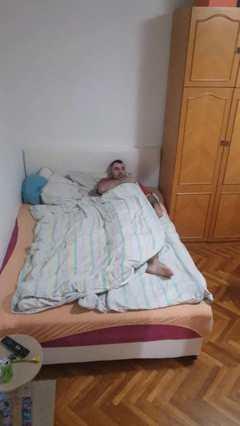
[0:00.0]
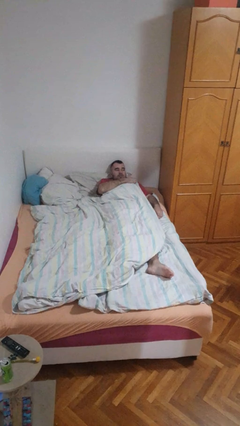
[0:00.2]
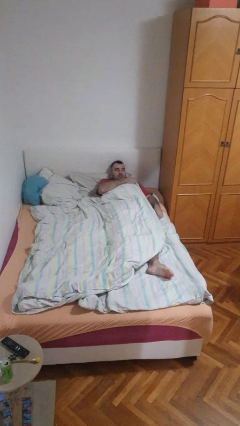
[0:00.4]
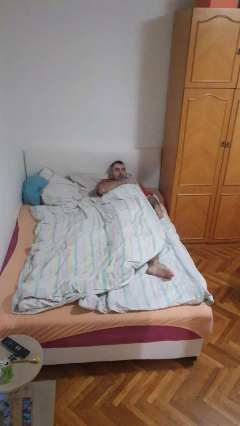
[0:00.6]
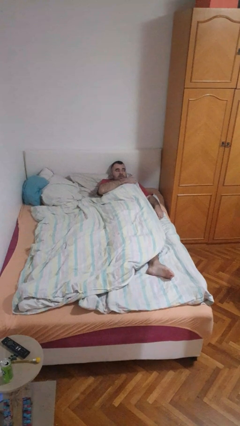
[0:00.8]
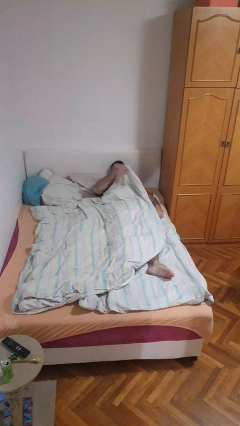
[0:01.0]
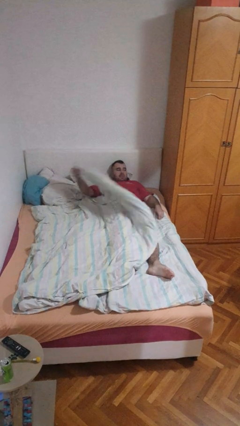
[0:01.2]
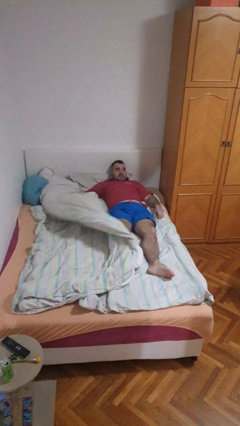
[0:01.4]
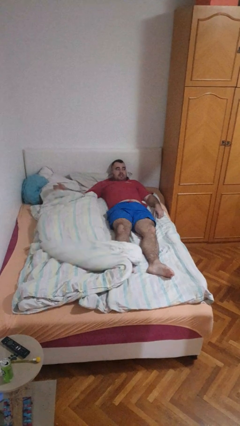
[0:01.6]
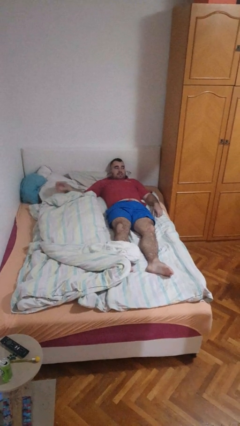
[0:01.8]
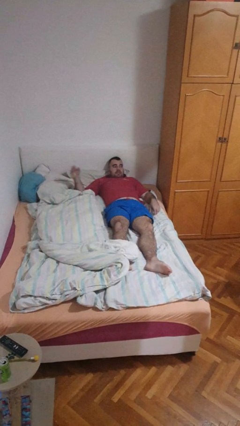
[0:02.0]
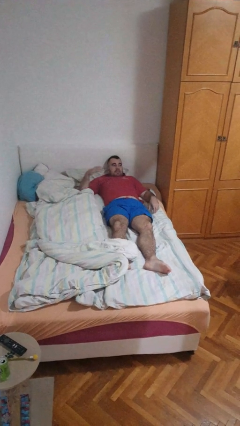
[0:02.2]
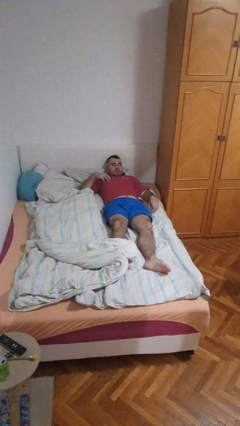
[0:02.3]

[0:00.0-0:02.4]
person uncovers with bedsheets

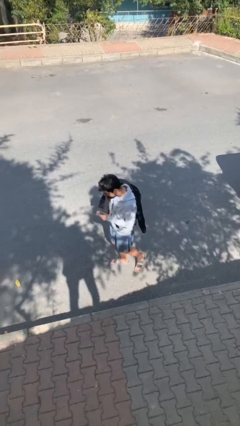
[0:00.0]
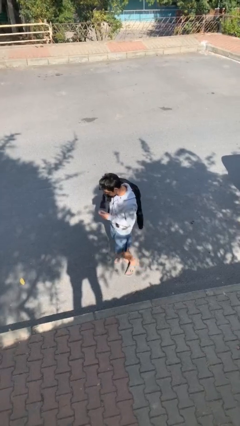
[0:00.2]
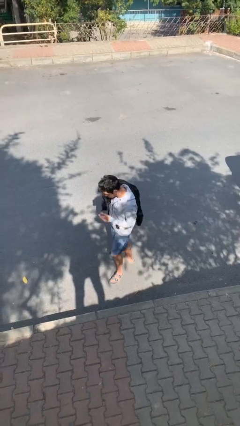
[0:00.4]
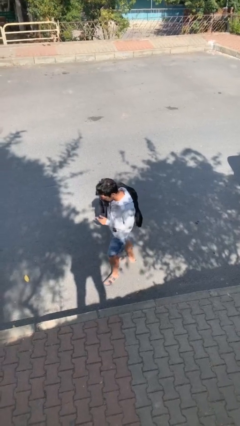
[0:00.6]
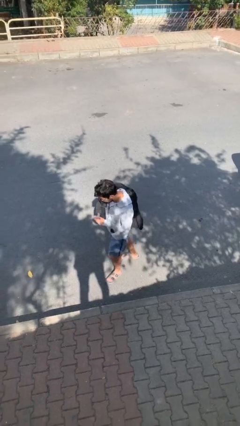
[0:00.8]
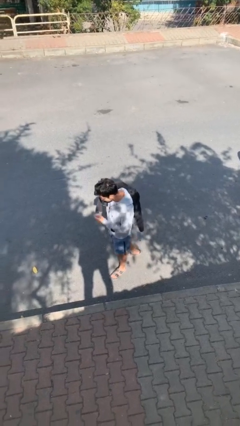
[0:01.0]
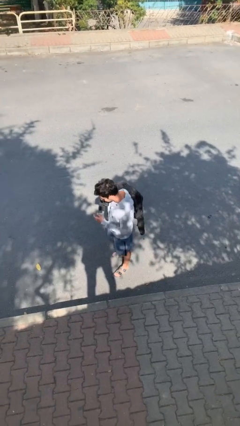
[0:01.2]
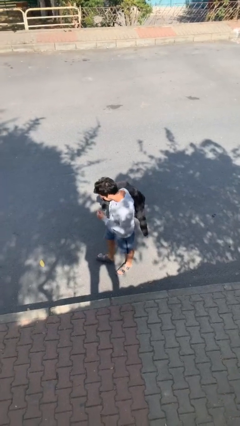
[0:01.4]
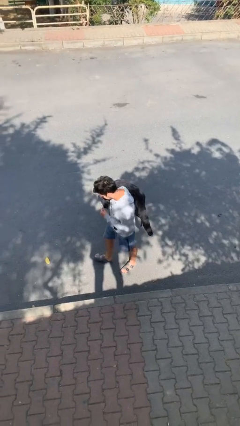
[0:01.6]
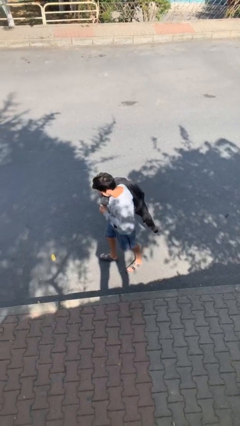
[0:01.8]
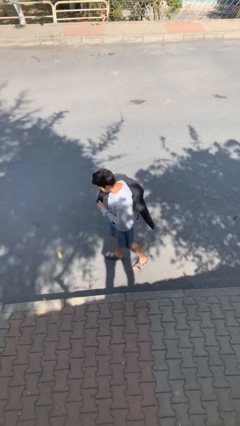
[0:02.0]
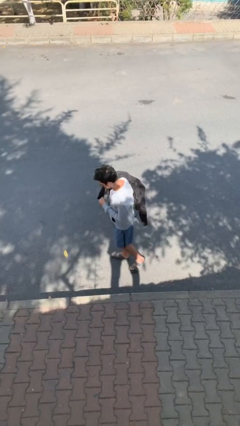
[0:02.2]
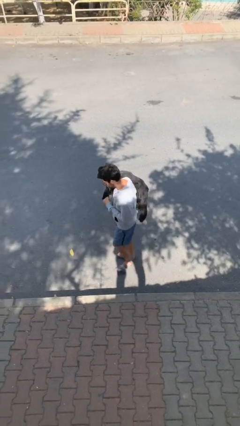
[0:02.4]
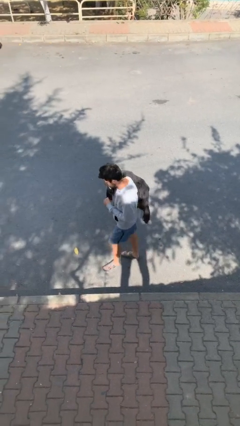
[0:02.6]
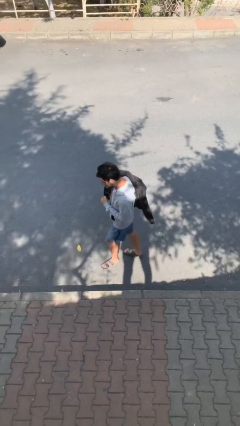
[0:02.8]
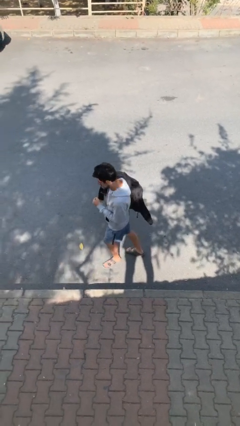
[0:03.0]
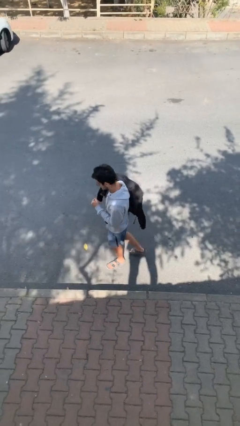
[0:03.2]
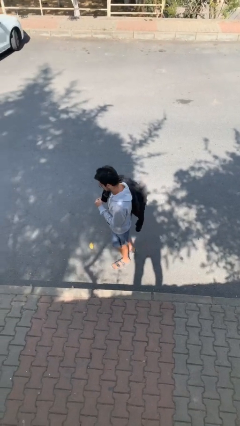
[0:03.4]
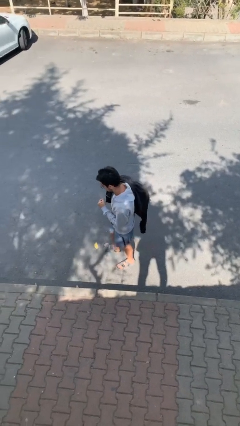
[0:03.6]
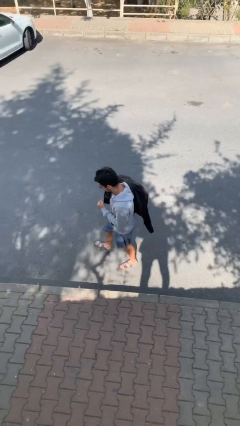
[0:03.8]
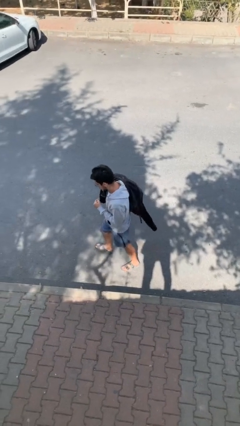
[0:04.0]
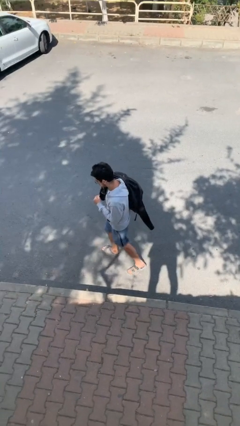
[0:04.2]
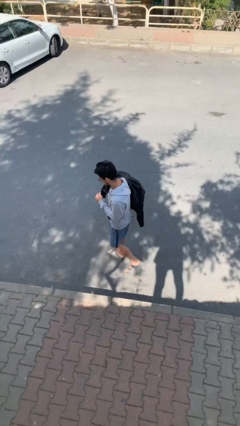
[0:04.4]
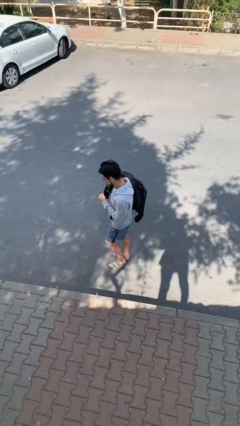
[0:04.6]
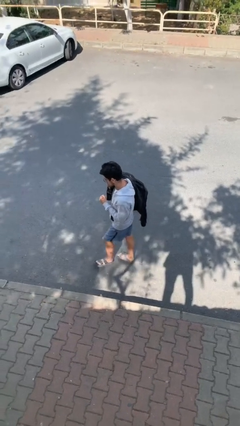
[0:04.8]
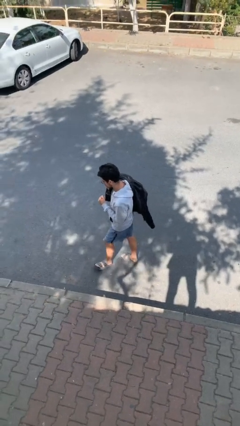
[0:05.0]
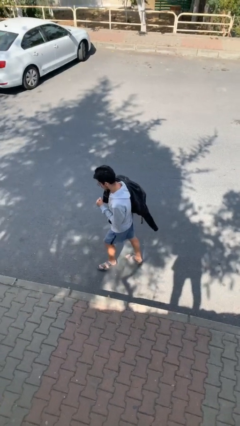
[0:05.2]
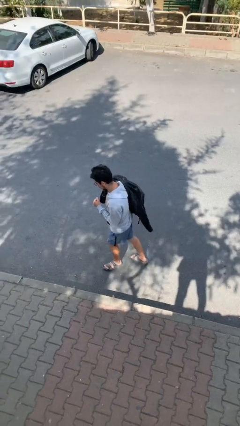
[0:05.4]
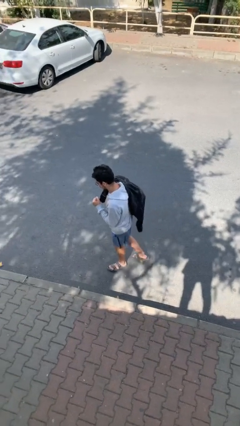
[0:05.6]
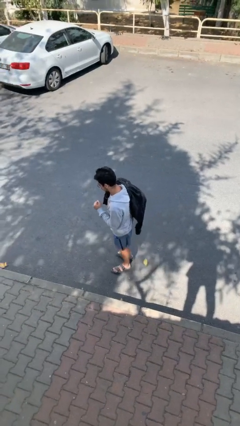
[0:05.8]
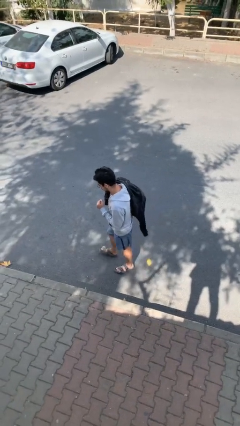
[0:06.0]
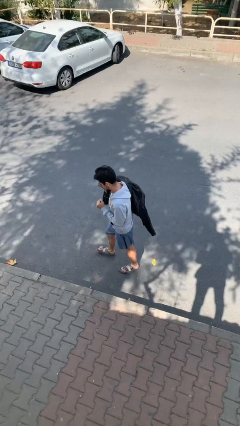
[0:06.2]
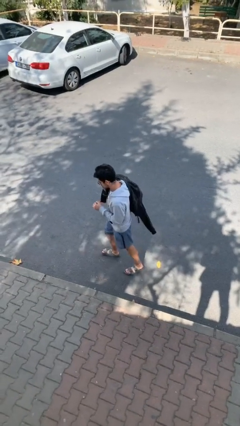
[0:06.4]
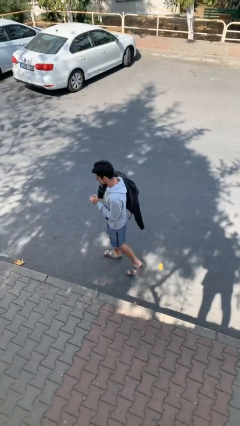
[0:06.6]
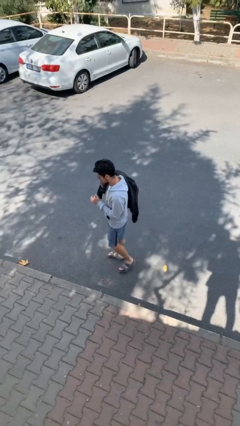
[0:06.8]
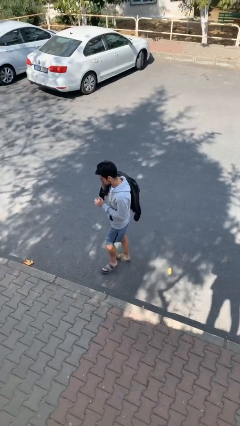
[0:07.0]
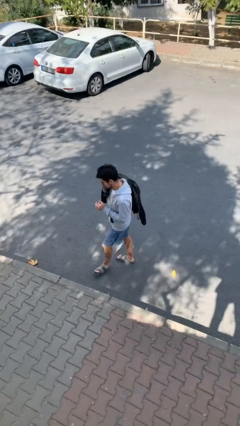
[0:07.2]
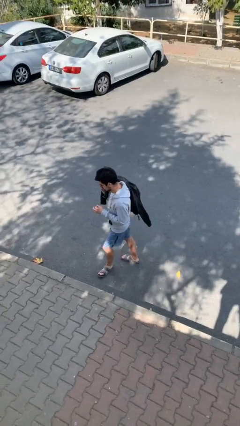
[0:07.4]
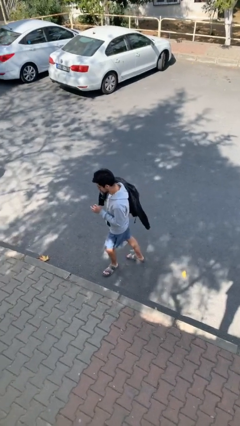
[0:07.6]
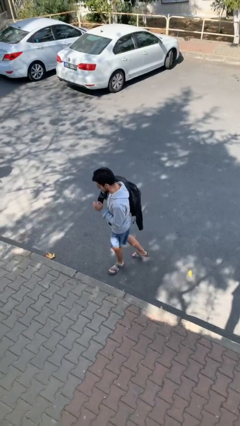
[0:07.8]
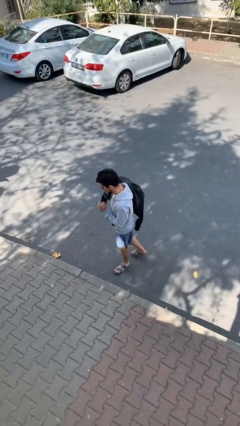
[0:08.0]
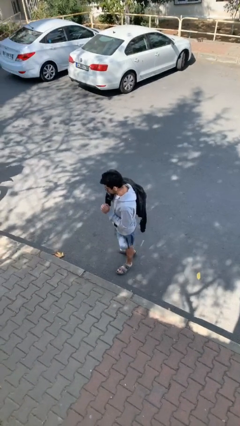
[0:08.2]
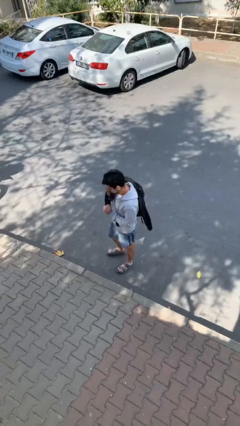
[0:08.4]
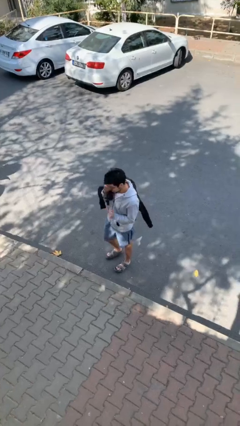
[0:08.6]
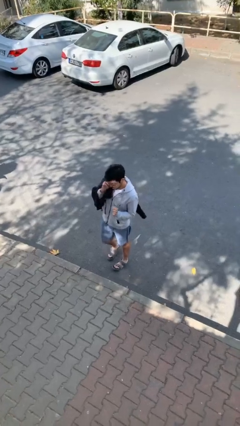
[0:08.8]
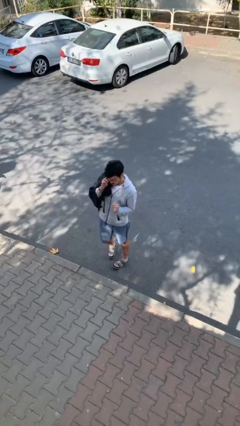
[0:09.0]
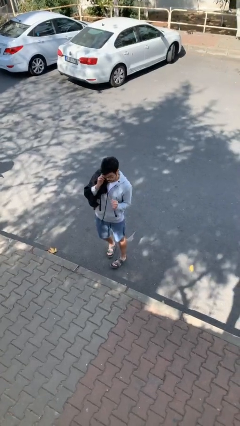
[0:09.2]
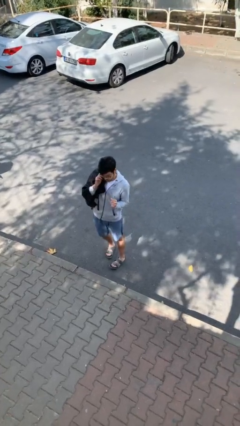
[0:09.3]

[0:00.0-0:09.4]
person talks on phone

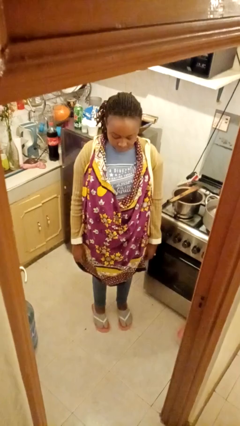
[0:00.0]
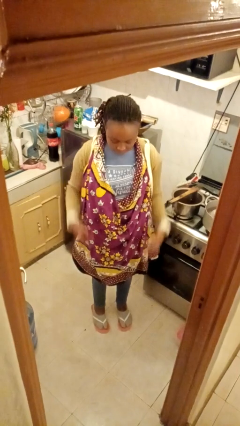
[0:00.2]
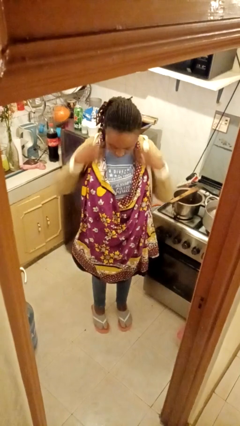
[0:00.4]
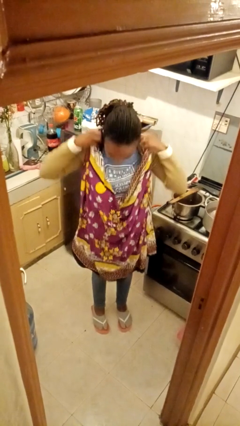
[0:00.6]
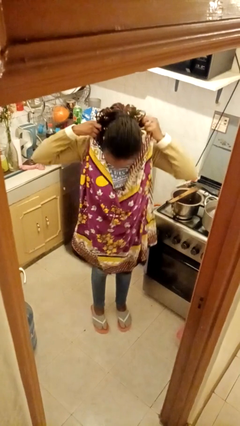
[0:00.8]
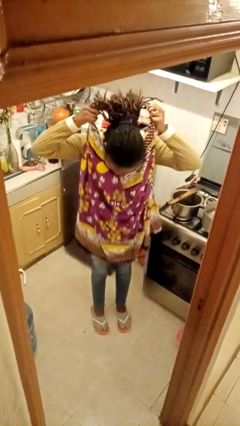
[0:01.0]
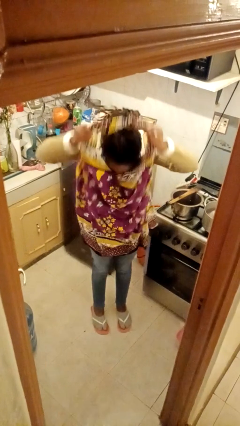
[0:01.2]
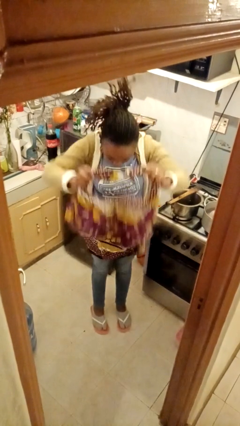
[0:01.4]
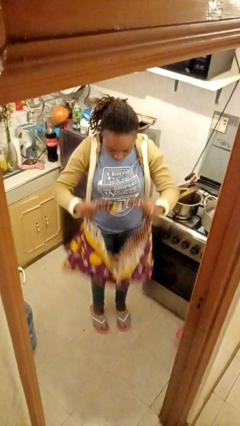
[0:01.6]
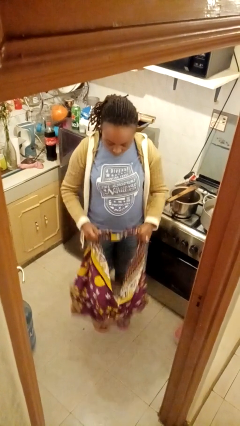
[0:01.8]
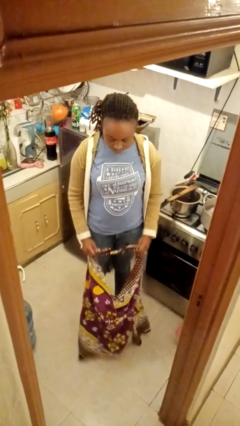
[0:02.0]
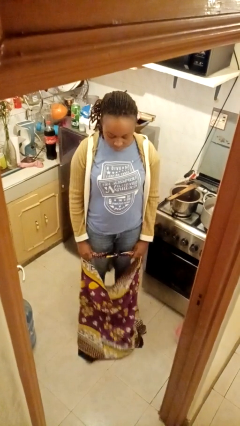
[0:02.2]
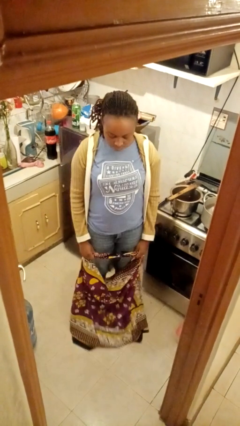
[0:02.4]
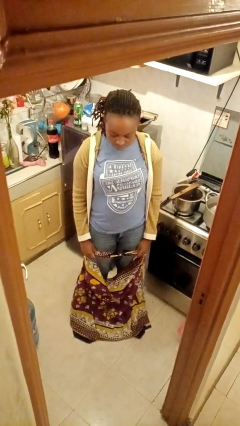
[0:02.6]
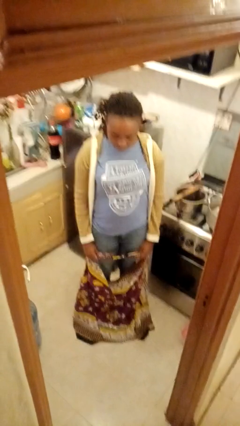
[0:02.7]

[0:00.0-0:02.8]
person takes off apron

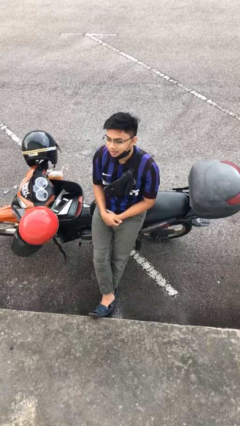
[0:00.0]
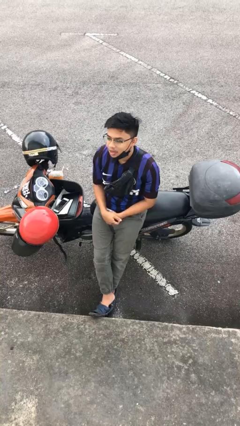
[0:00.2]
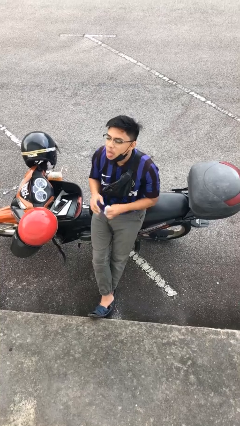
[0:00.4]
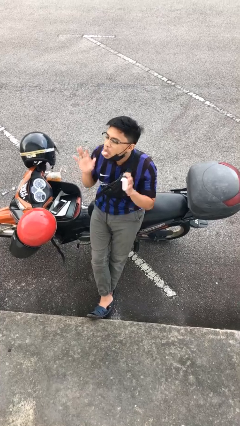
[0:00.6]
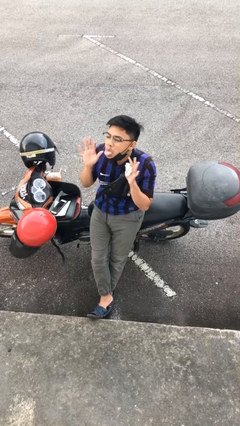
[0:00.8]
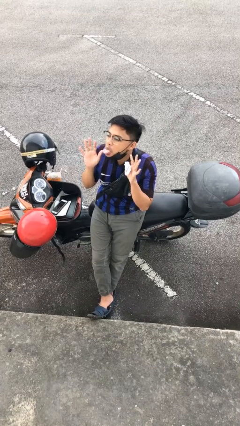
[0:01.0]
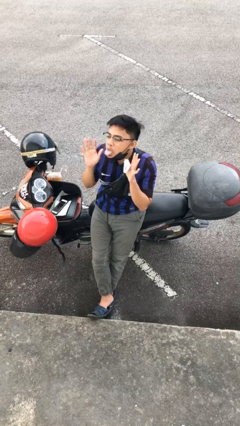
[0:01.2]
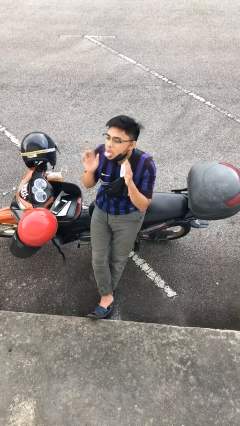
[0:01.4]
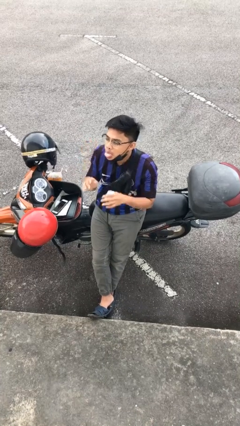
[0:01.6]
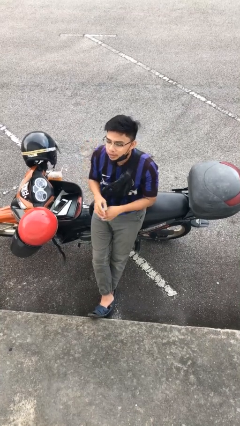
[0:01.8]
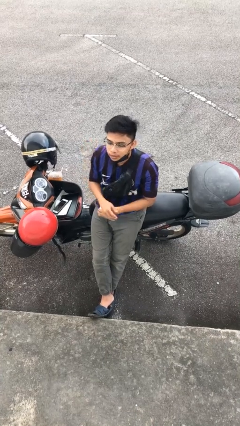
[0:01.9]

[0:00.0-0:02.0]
person sticks out tongue

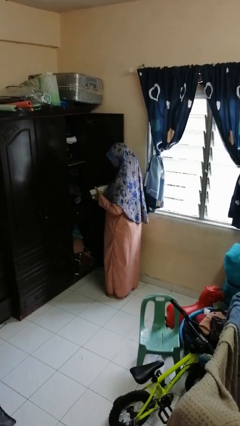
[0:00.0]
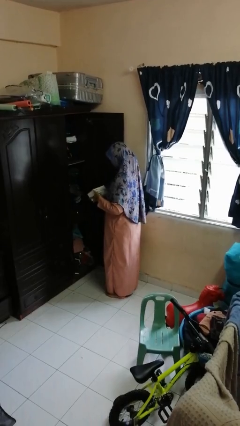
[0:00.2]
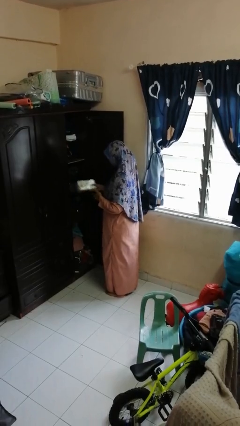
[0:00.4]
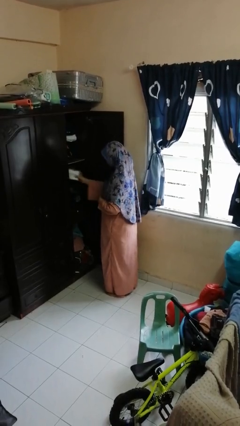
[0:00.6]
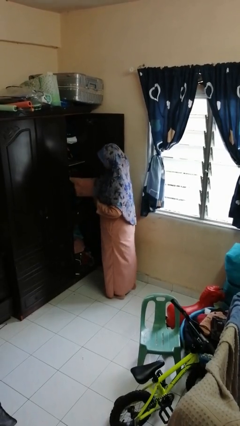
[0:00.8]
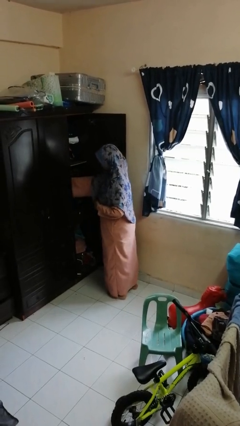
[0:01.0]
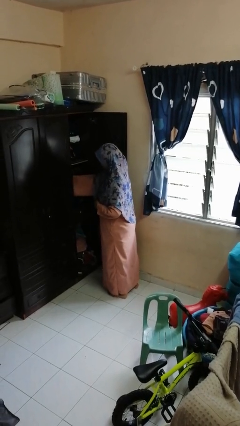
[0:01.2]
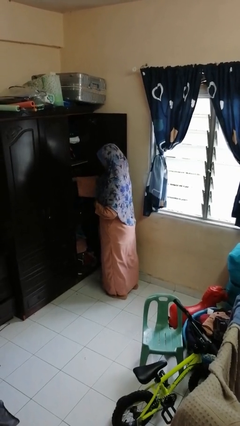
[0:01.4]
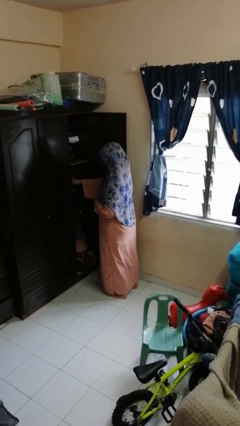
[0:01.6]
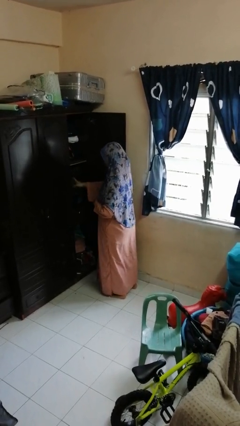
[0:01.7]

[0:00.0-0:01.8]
person puts down object into cabinet
